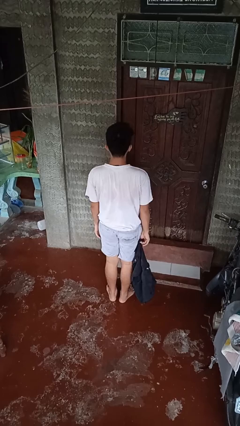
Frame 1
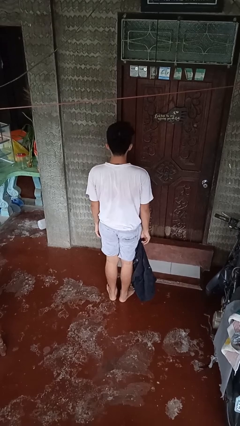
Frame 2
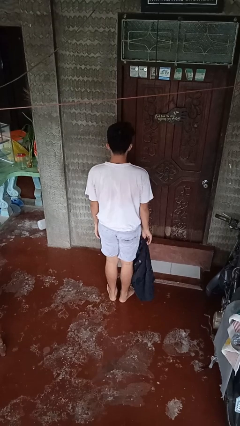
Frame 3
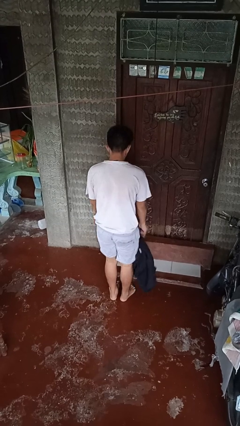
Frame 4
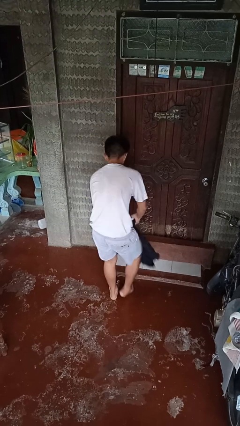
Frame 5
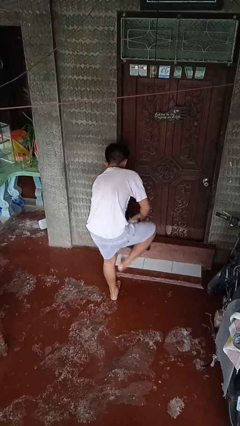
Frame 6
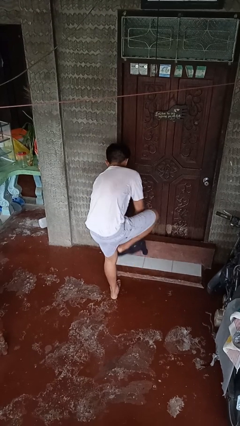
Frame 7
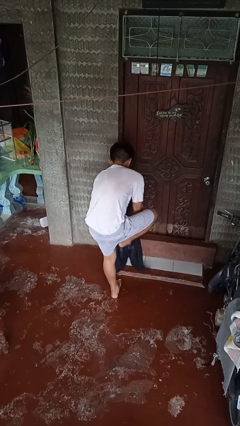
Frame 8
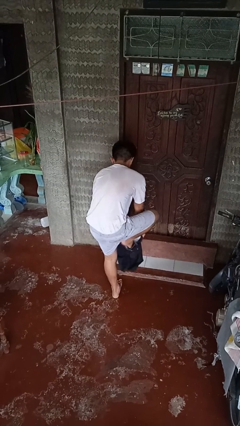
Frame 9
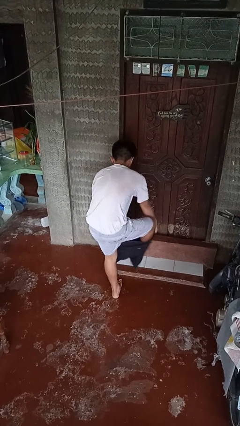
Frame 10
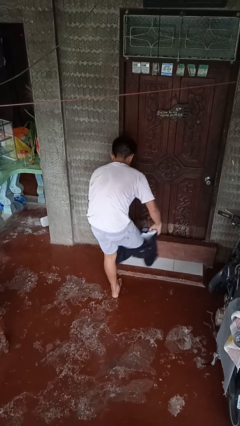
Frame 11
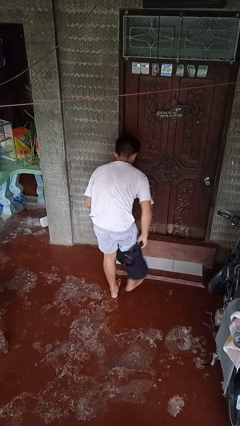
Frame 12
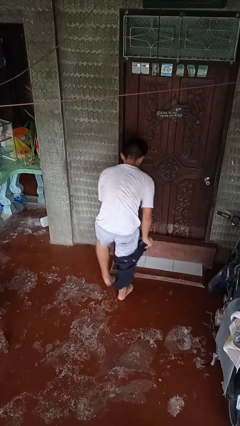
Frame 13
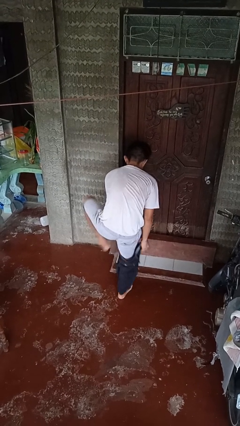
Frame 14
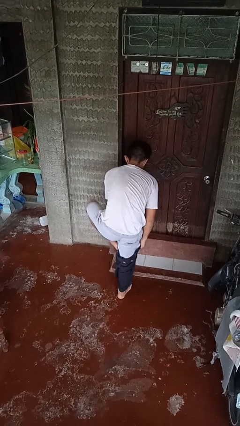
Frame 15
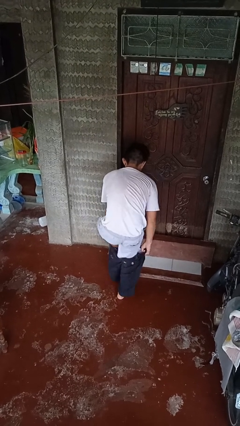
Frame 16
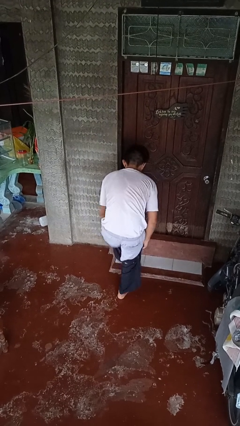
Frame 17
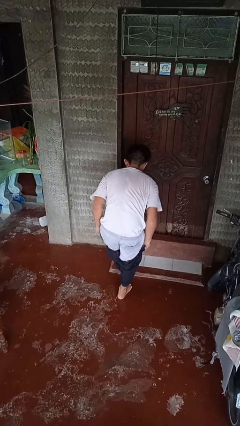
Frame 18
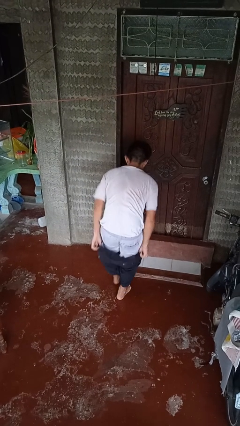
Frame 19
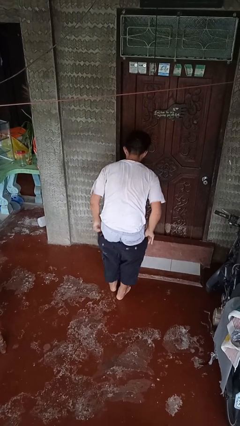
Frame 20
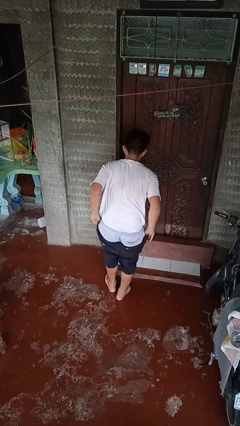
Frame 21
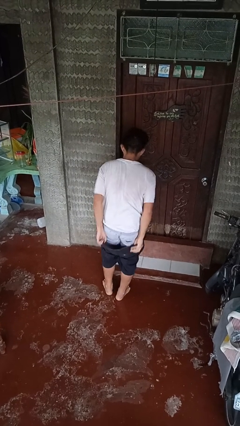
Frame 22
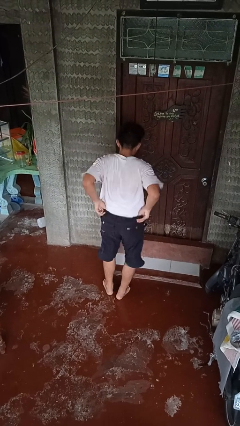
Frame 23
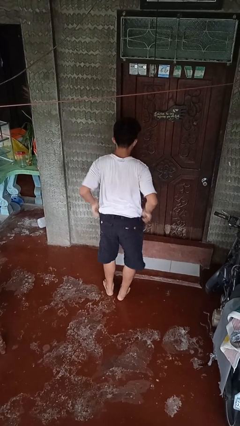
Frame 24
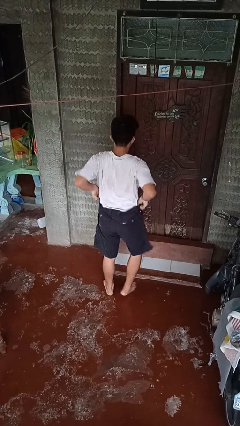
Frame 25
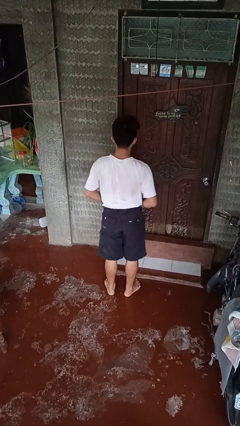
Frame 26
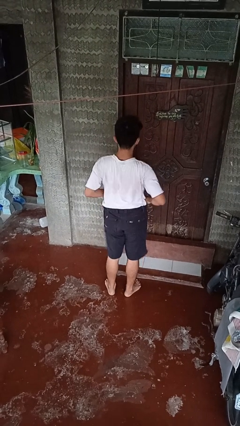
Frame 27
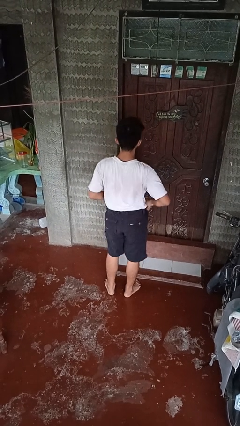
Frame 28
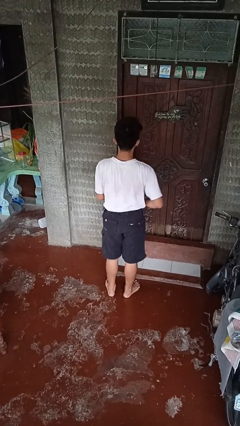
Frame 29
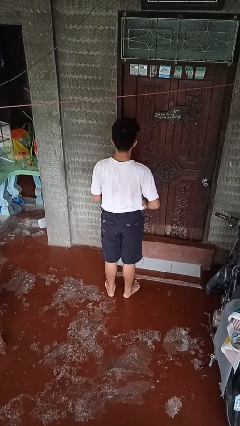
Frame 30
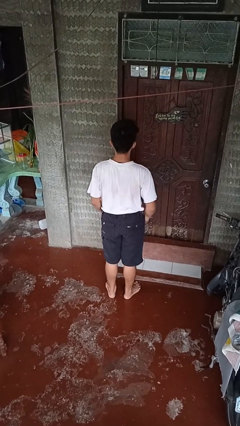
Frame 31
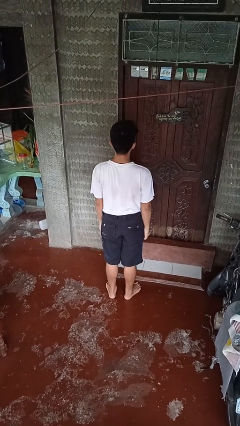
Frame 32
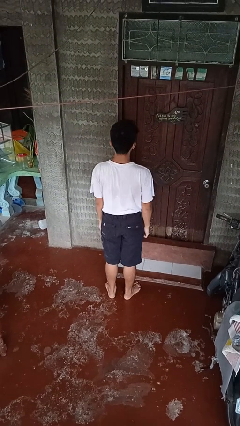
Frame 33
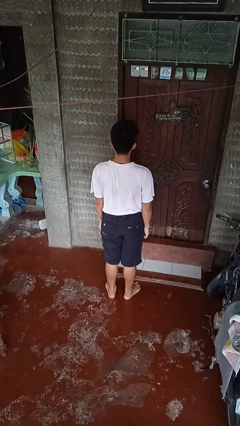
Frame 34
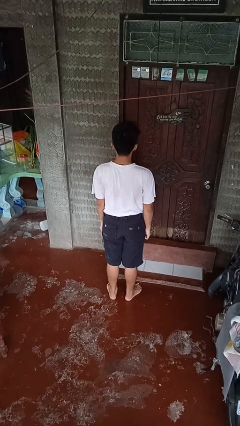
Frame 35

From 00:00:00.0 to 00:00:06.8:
person puts on pants

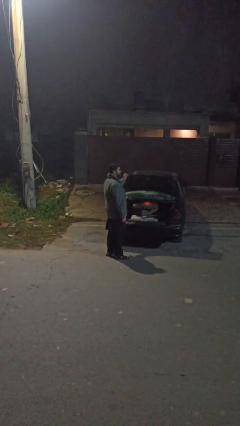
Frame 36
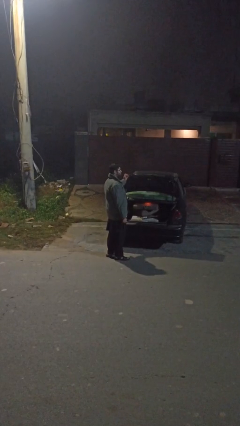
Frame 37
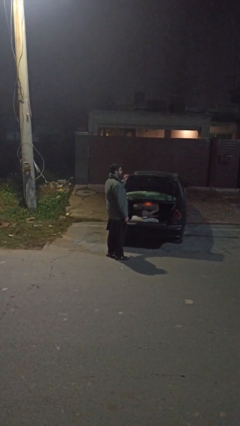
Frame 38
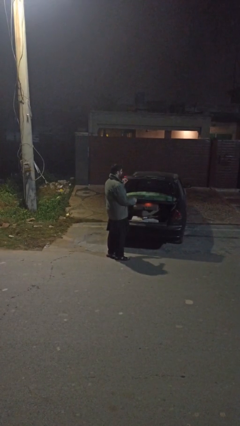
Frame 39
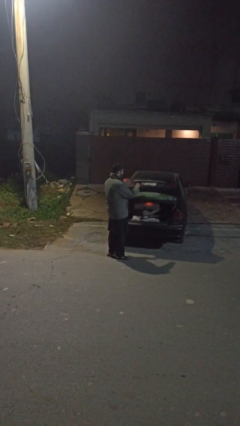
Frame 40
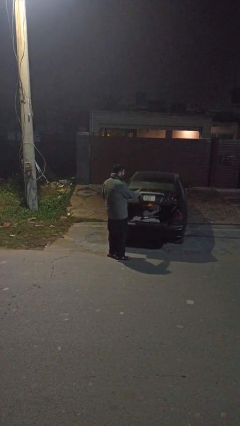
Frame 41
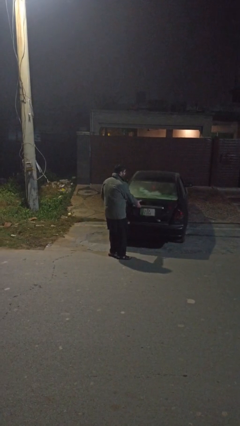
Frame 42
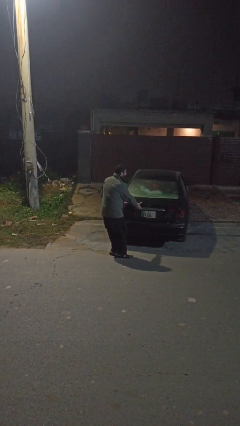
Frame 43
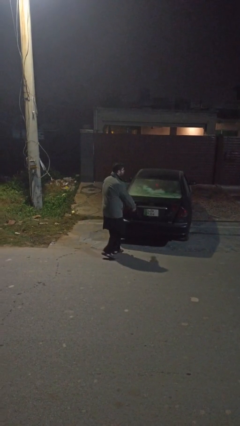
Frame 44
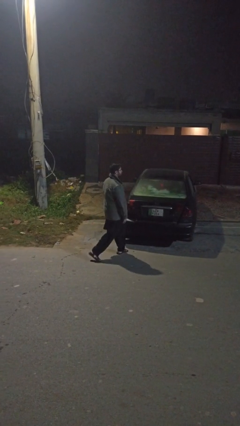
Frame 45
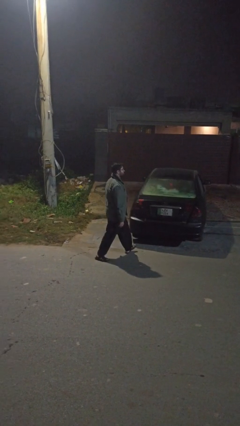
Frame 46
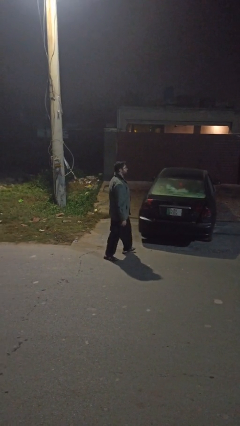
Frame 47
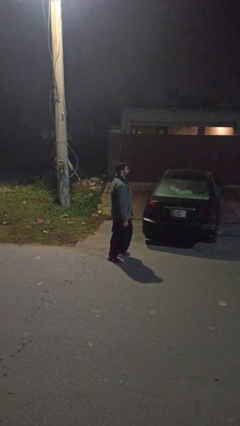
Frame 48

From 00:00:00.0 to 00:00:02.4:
person closes car trunk

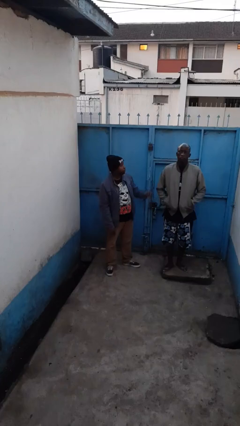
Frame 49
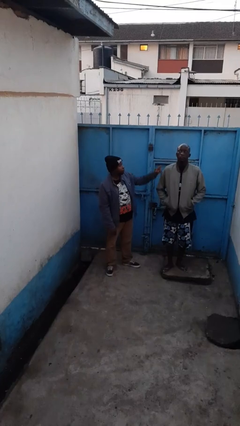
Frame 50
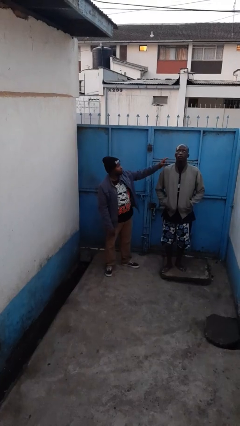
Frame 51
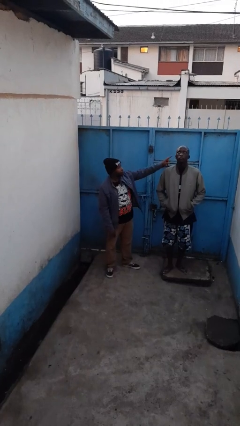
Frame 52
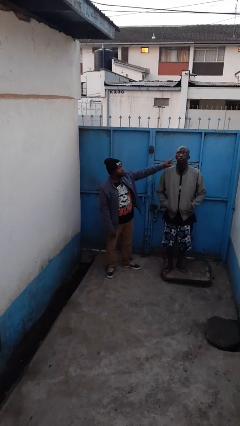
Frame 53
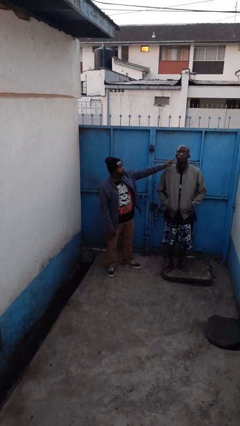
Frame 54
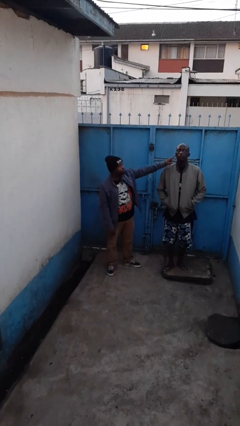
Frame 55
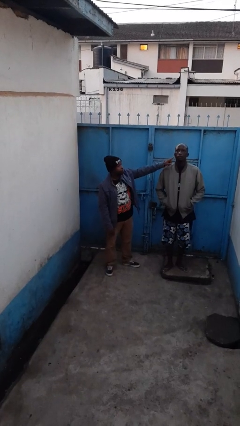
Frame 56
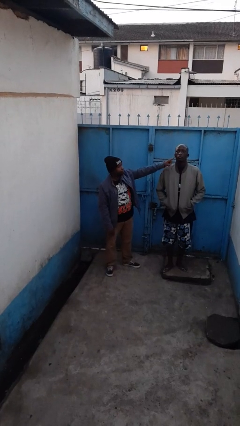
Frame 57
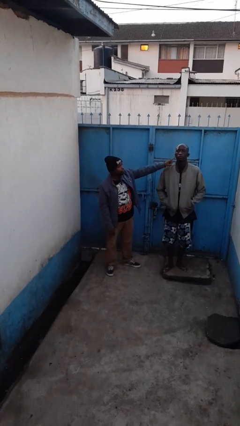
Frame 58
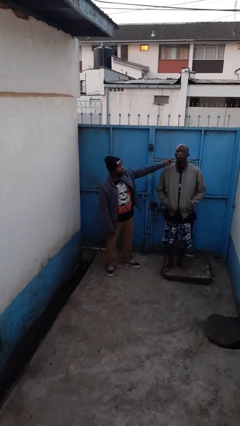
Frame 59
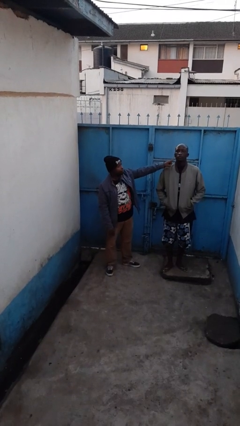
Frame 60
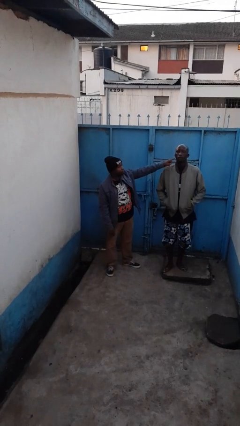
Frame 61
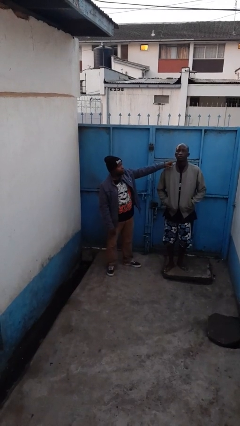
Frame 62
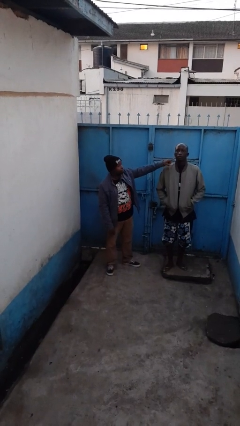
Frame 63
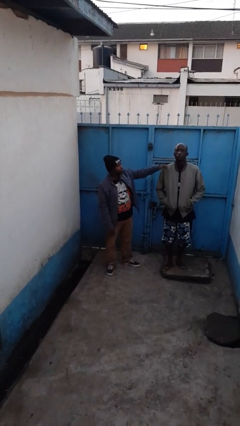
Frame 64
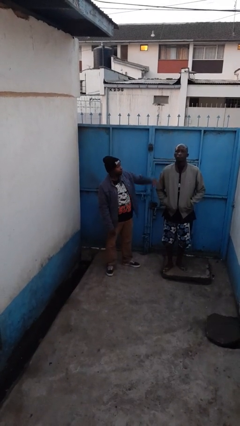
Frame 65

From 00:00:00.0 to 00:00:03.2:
person touches face of person

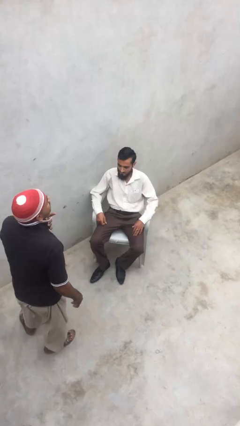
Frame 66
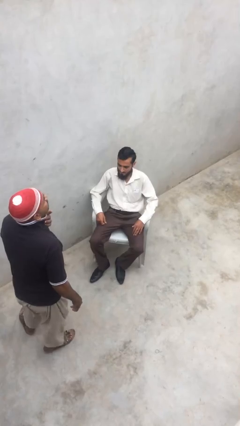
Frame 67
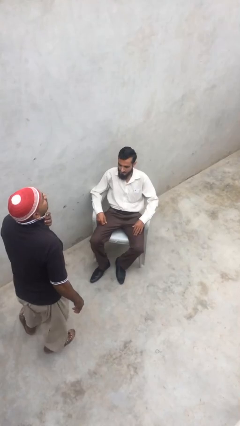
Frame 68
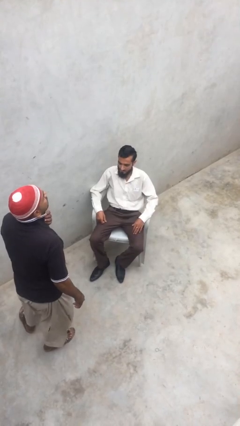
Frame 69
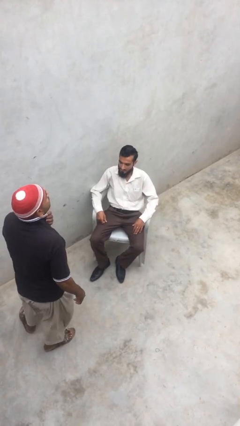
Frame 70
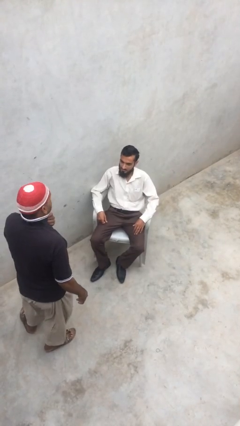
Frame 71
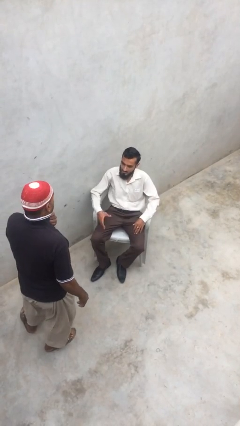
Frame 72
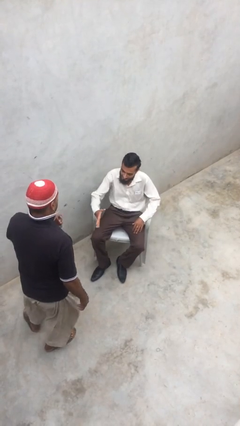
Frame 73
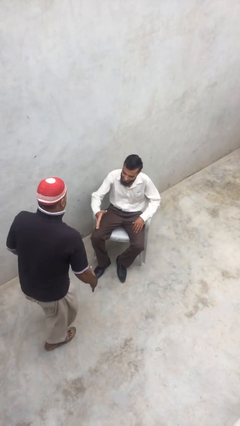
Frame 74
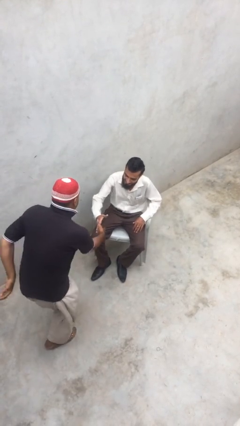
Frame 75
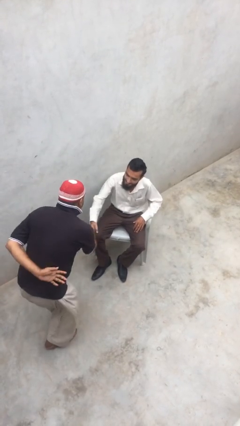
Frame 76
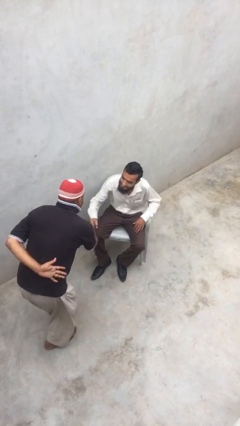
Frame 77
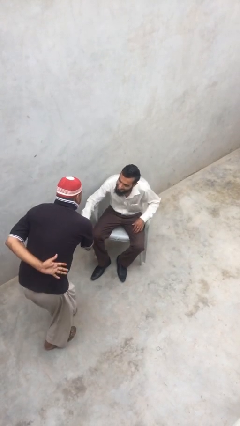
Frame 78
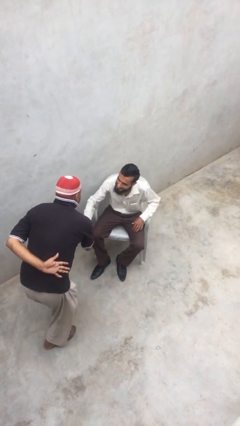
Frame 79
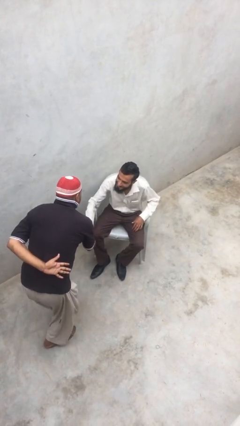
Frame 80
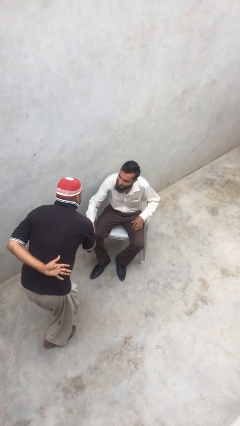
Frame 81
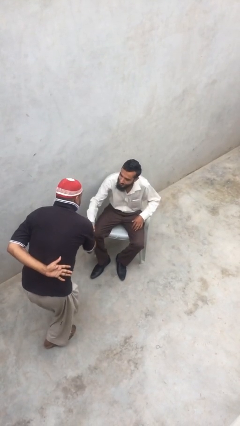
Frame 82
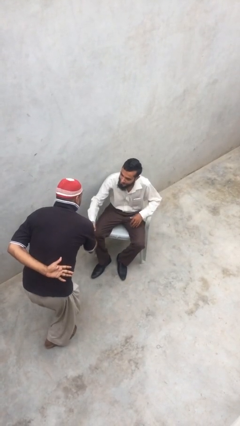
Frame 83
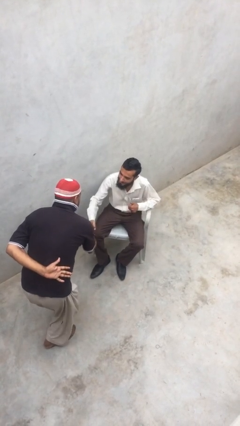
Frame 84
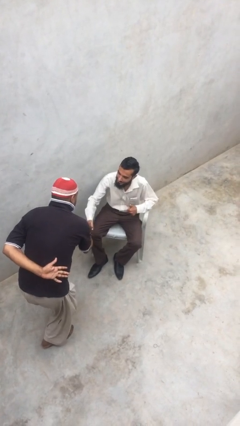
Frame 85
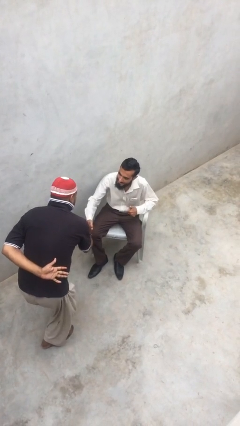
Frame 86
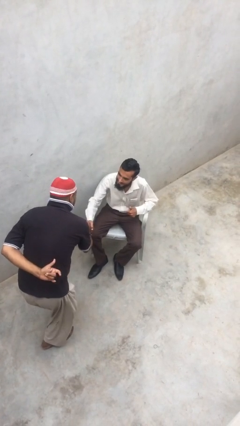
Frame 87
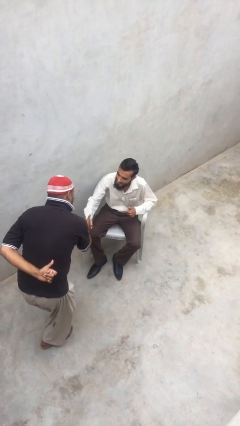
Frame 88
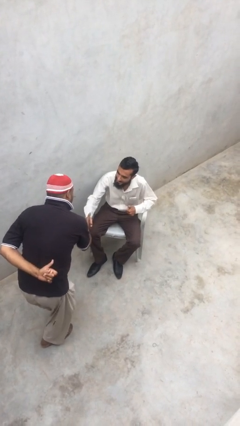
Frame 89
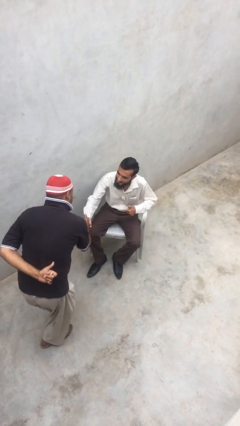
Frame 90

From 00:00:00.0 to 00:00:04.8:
person shakes hand

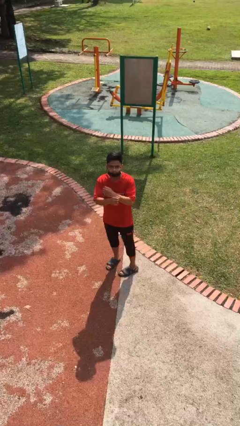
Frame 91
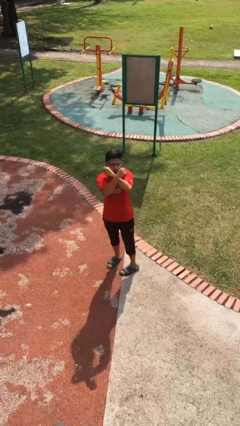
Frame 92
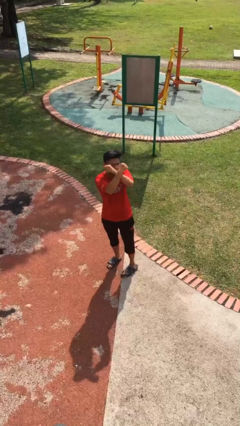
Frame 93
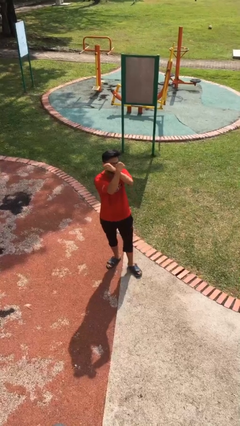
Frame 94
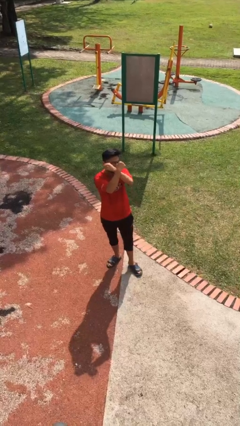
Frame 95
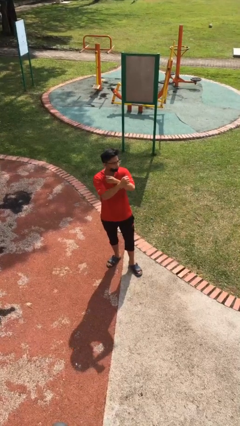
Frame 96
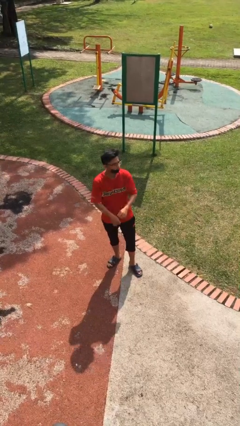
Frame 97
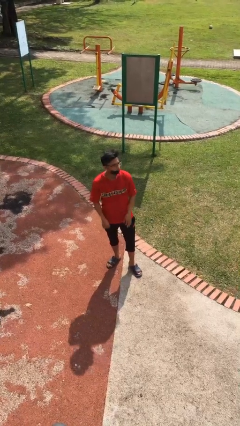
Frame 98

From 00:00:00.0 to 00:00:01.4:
person gestures arms x
